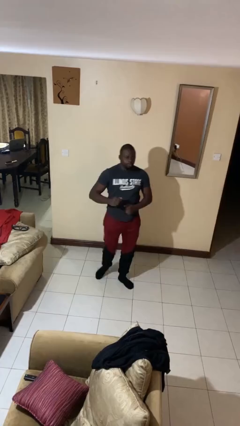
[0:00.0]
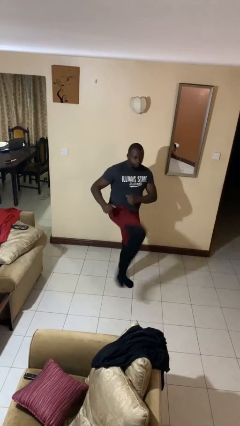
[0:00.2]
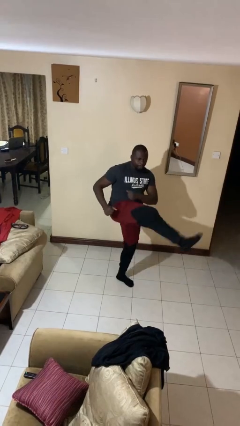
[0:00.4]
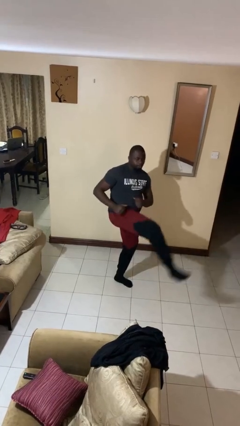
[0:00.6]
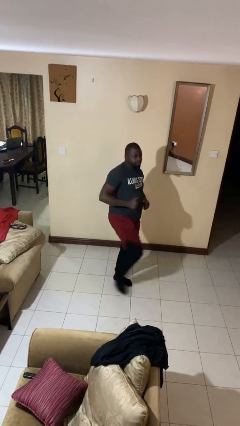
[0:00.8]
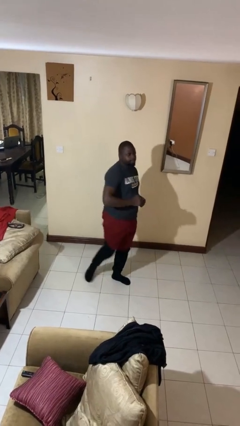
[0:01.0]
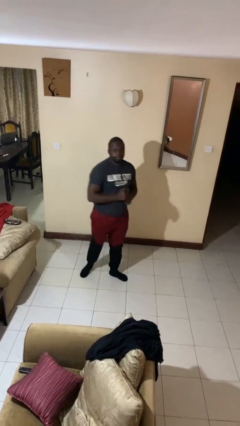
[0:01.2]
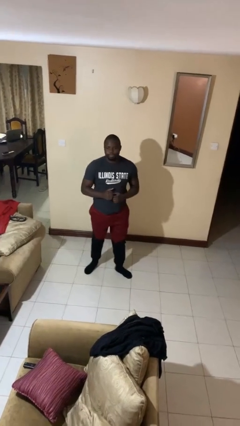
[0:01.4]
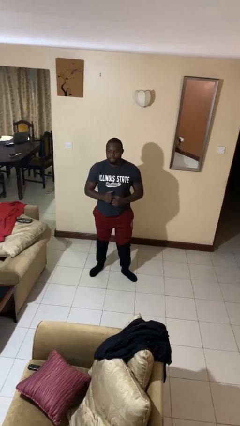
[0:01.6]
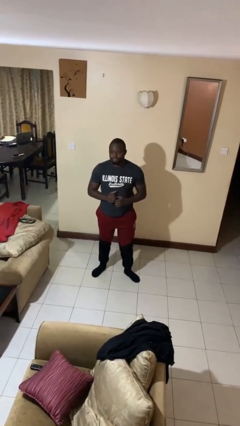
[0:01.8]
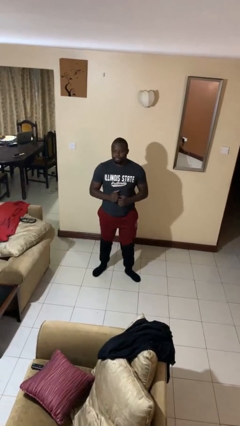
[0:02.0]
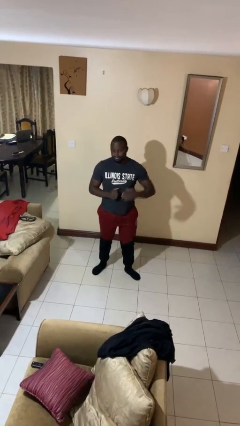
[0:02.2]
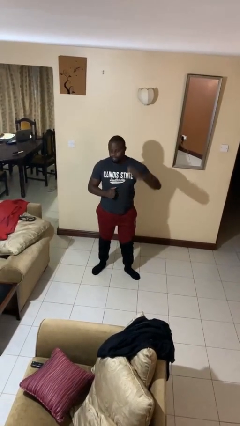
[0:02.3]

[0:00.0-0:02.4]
person karate kicks

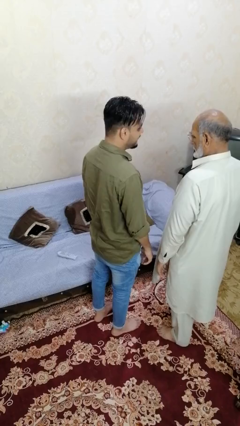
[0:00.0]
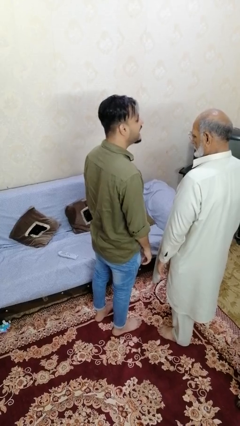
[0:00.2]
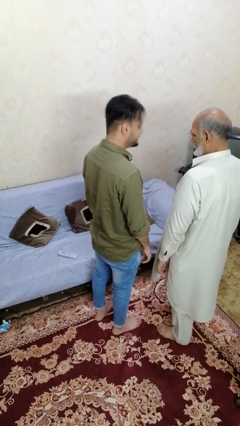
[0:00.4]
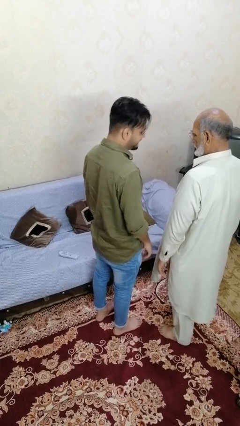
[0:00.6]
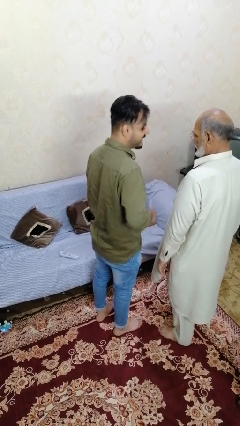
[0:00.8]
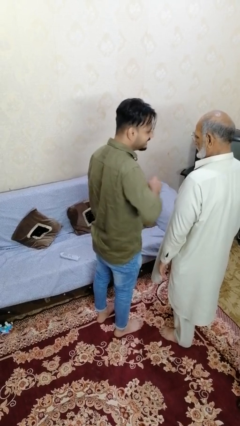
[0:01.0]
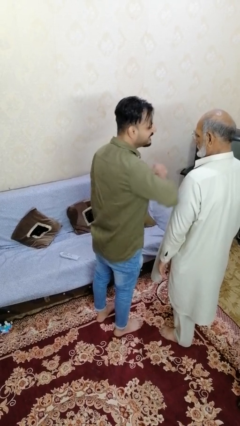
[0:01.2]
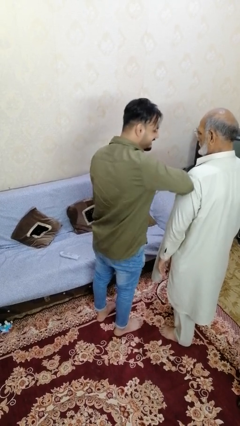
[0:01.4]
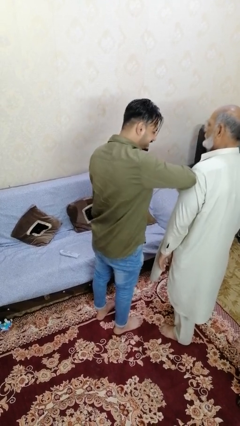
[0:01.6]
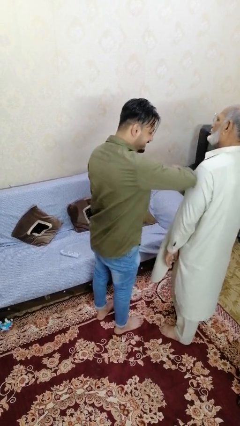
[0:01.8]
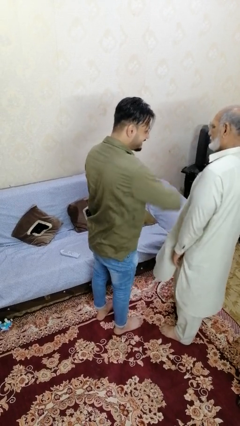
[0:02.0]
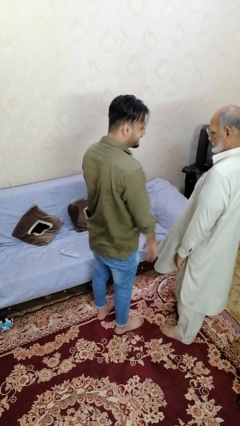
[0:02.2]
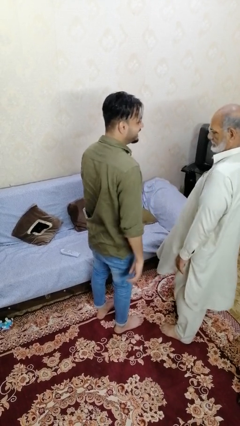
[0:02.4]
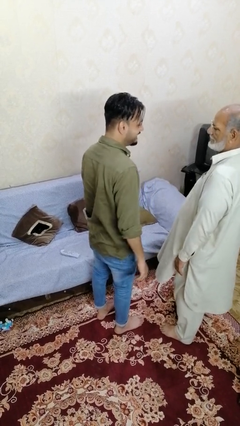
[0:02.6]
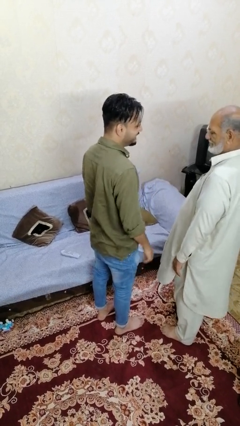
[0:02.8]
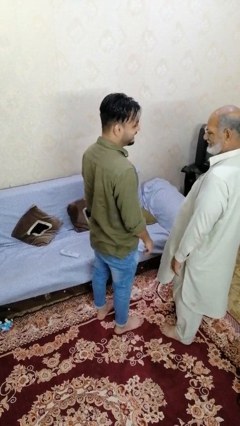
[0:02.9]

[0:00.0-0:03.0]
person nudges person with elbow

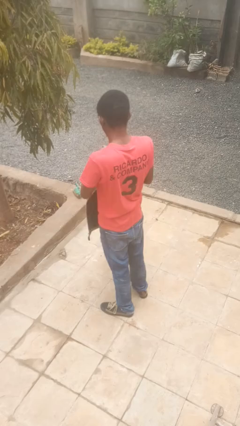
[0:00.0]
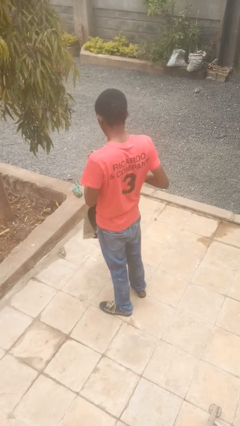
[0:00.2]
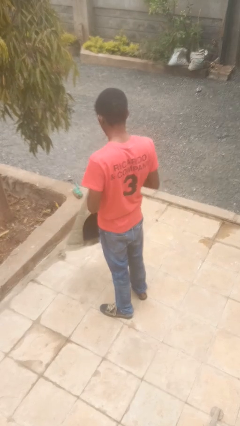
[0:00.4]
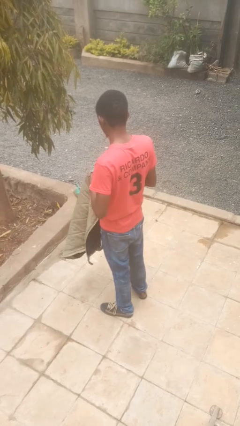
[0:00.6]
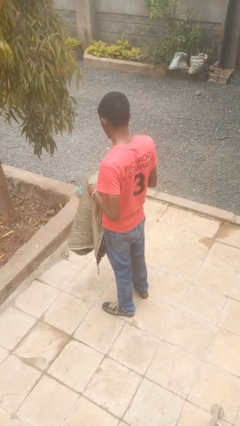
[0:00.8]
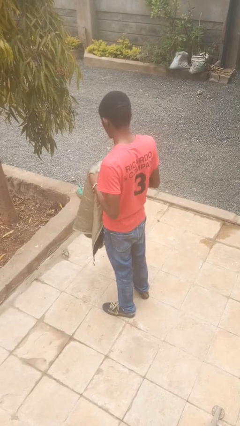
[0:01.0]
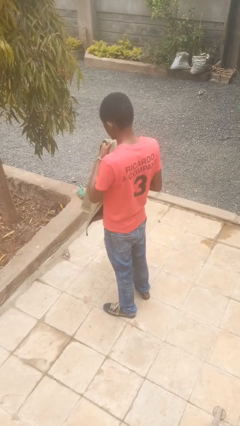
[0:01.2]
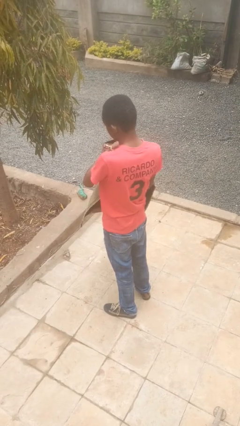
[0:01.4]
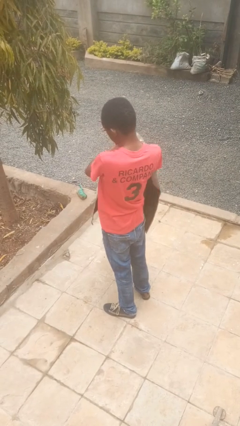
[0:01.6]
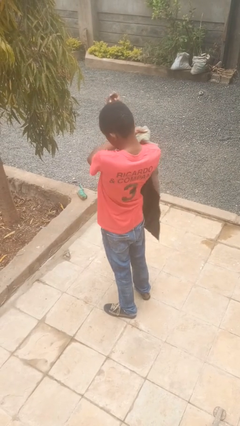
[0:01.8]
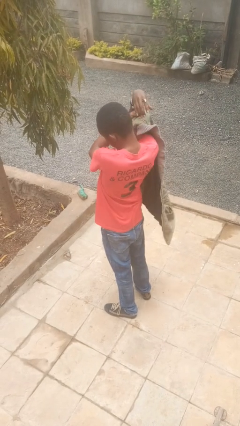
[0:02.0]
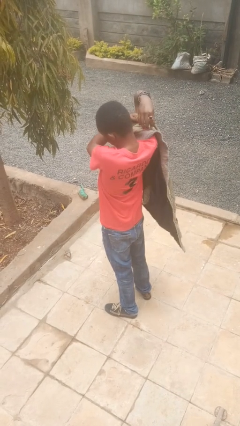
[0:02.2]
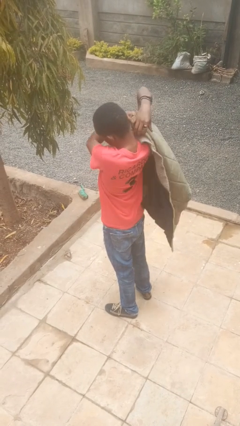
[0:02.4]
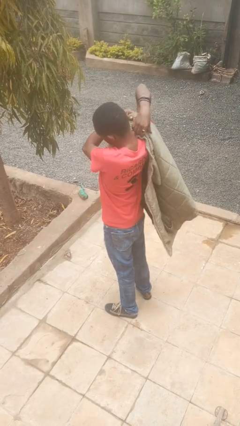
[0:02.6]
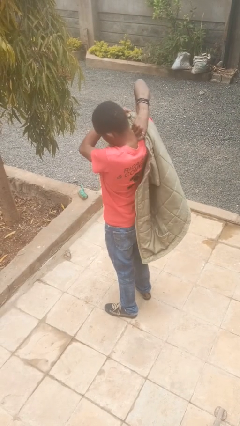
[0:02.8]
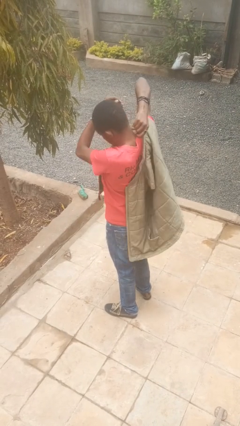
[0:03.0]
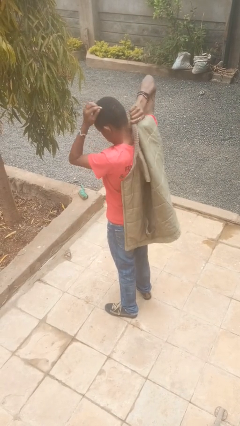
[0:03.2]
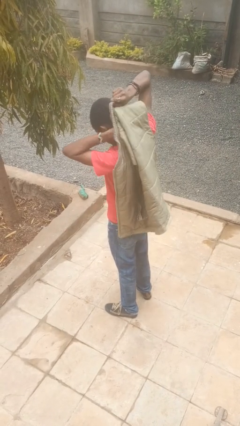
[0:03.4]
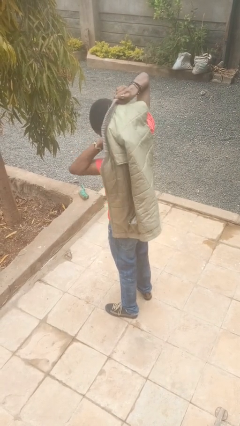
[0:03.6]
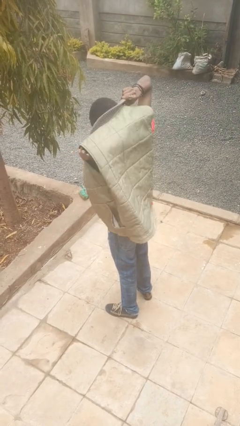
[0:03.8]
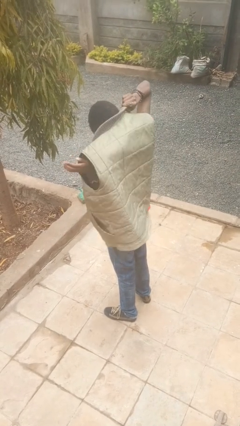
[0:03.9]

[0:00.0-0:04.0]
person puts on jacket

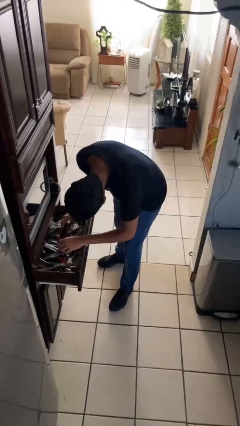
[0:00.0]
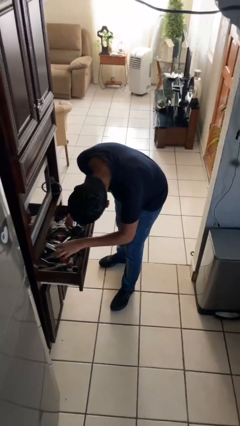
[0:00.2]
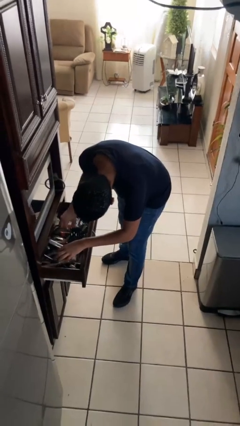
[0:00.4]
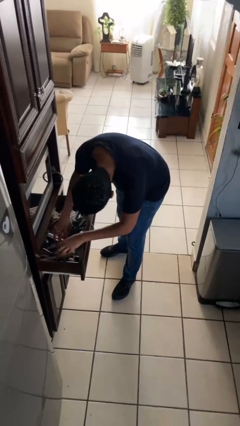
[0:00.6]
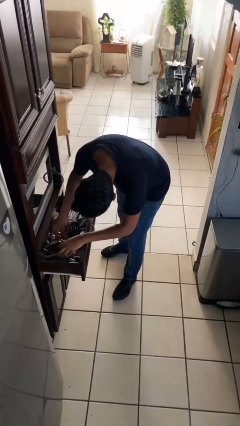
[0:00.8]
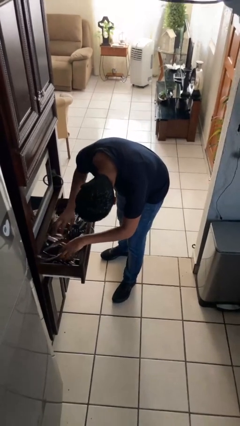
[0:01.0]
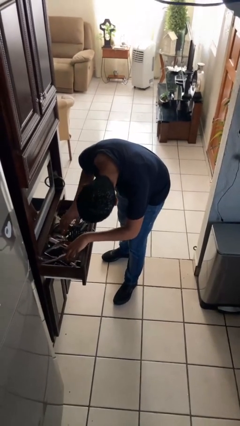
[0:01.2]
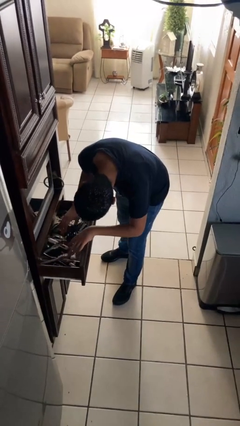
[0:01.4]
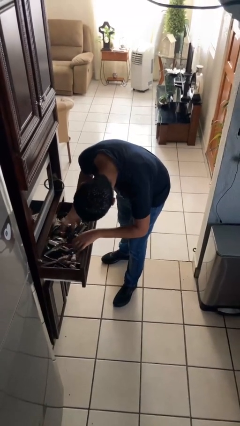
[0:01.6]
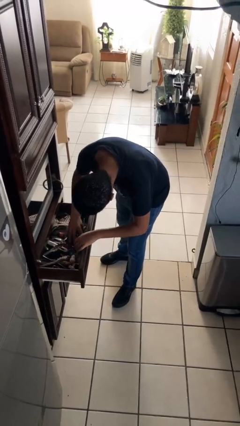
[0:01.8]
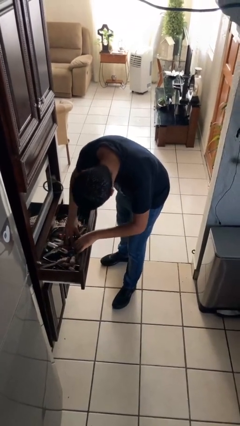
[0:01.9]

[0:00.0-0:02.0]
person searches in kitchen drawer

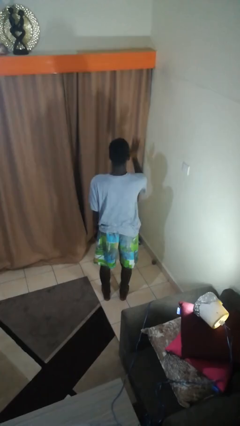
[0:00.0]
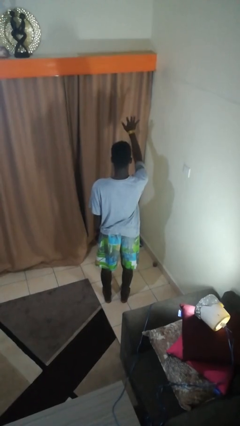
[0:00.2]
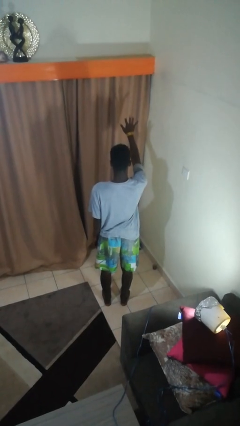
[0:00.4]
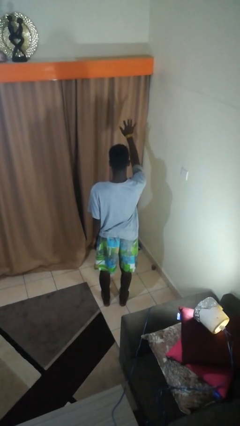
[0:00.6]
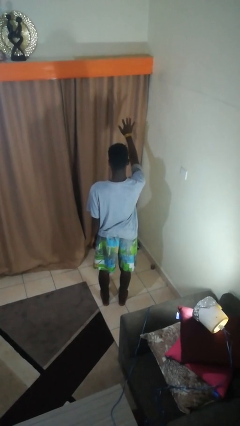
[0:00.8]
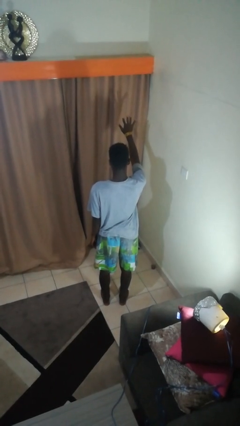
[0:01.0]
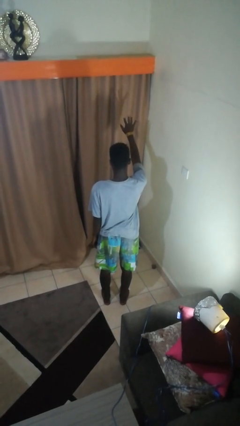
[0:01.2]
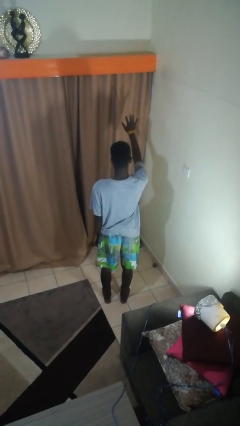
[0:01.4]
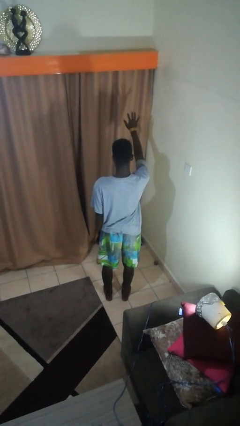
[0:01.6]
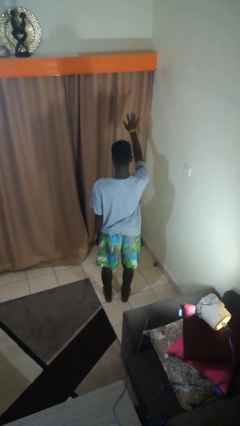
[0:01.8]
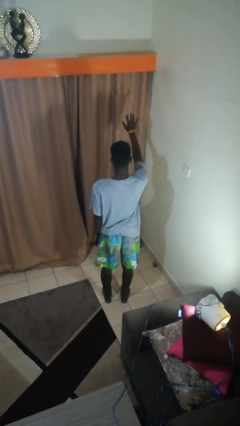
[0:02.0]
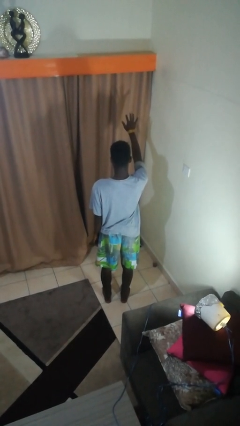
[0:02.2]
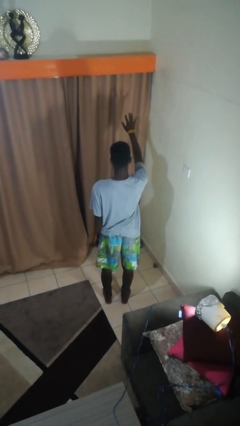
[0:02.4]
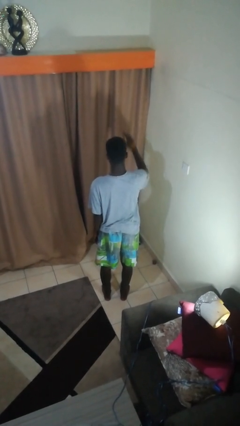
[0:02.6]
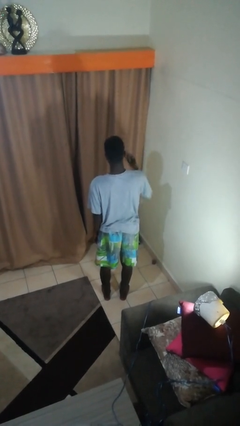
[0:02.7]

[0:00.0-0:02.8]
person gestures number five

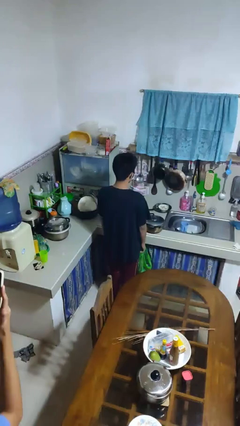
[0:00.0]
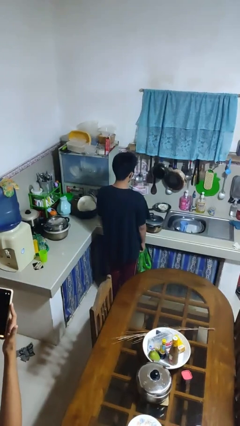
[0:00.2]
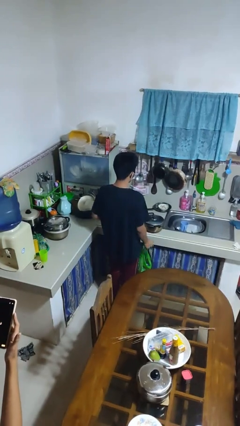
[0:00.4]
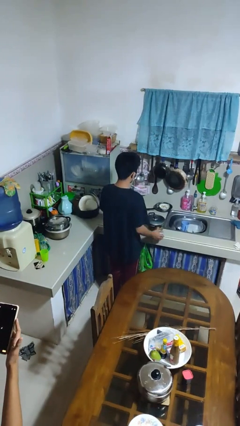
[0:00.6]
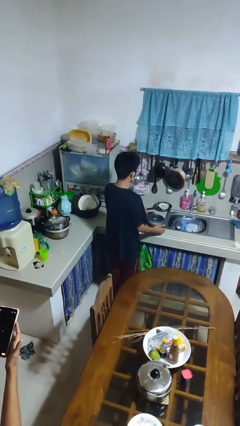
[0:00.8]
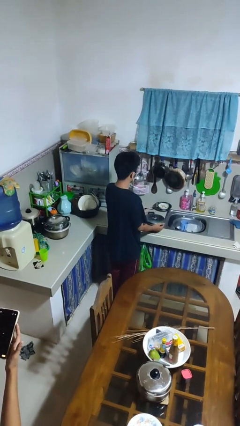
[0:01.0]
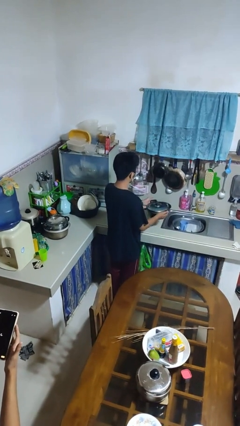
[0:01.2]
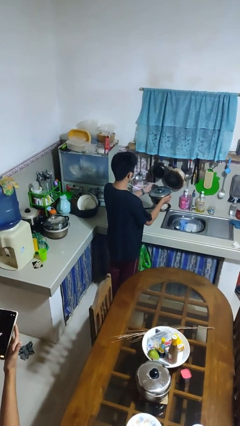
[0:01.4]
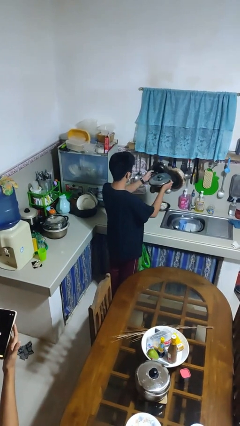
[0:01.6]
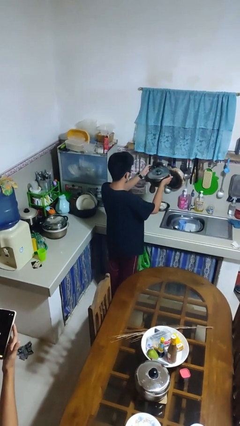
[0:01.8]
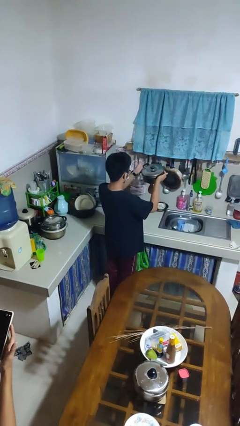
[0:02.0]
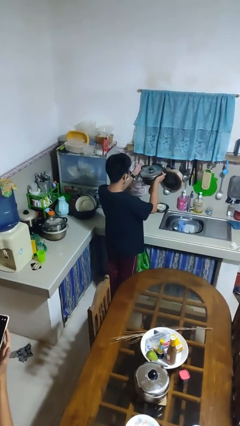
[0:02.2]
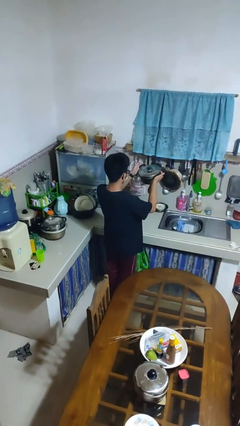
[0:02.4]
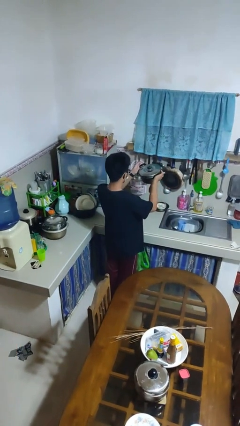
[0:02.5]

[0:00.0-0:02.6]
person picks up object from countertop

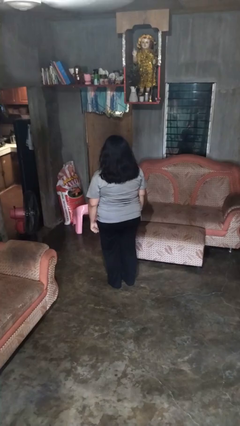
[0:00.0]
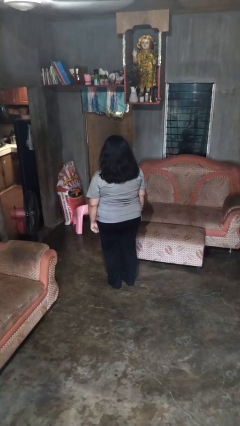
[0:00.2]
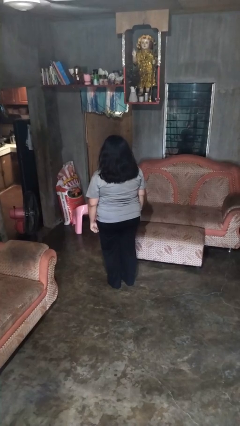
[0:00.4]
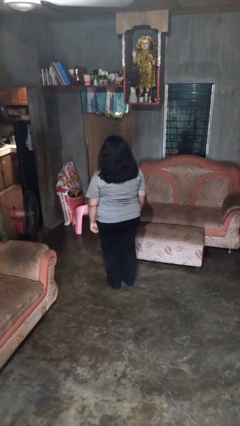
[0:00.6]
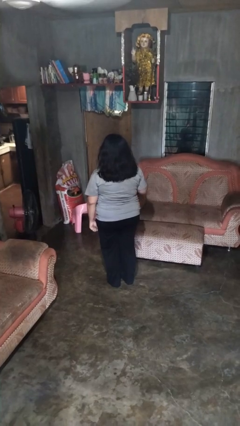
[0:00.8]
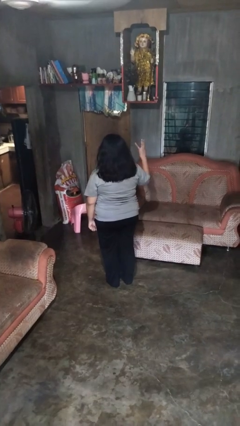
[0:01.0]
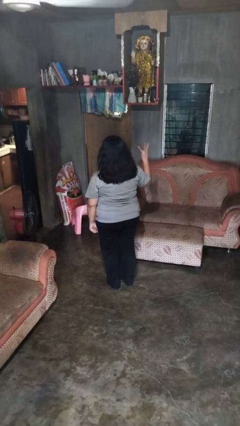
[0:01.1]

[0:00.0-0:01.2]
person gestures number three
